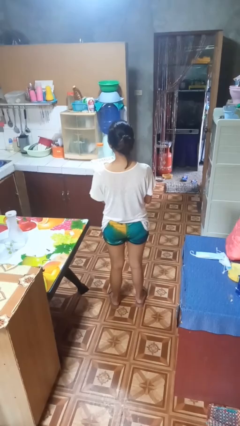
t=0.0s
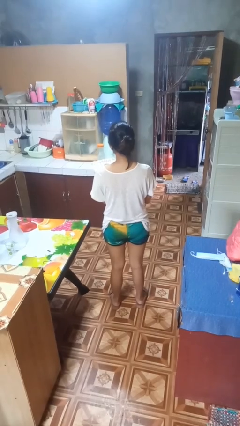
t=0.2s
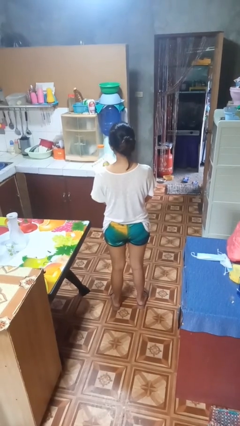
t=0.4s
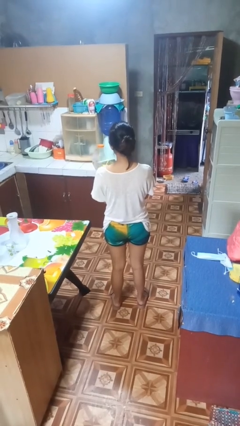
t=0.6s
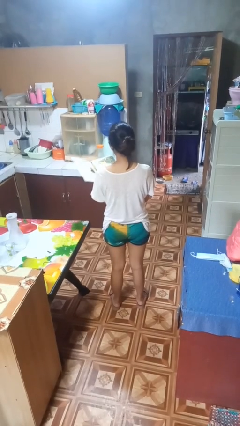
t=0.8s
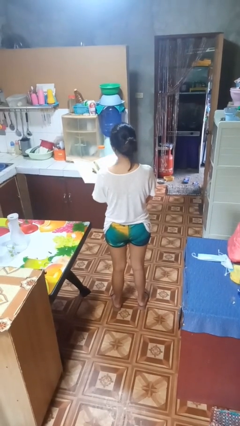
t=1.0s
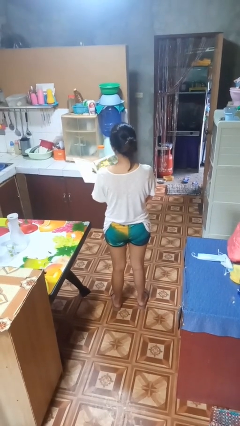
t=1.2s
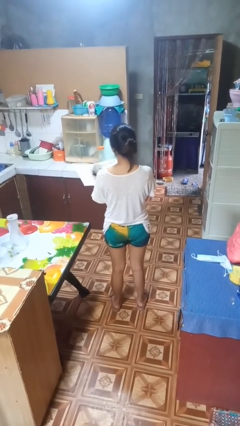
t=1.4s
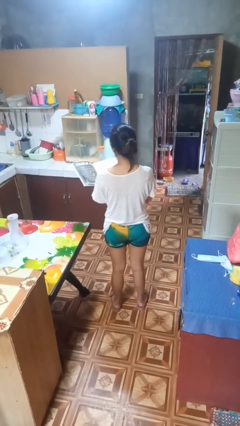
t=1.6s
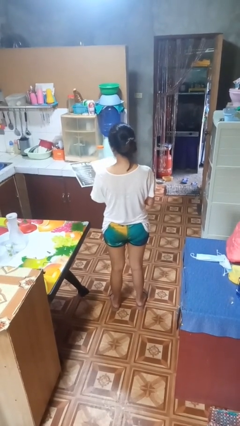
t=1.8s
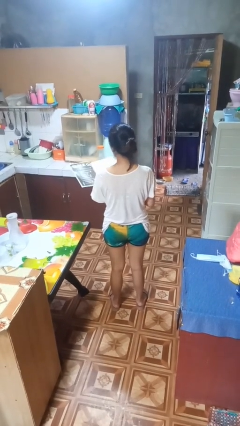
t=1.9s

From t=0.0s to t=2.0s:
person reads magazine

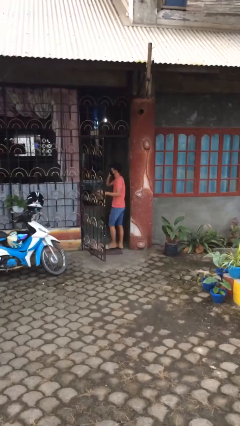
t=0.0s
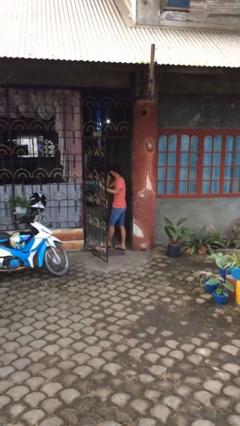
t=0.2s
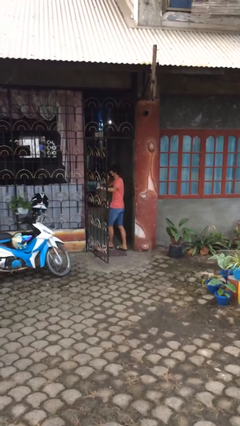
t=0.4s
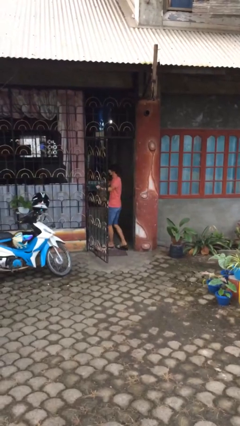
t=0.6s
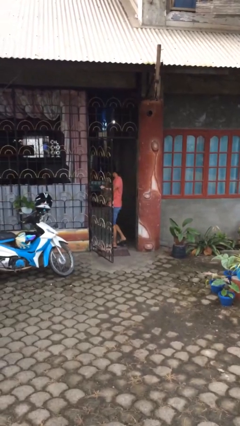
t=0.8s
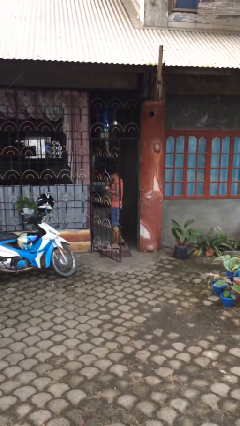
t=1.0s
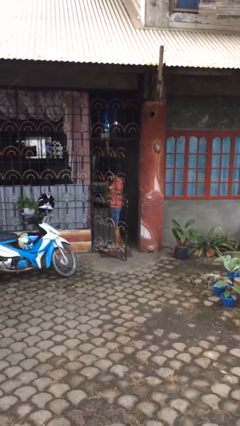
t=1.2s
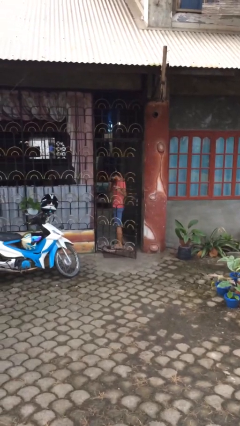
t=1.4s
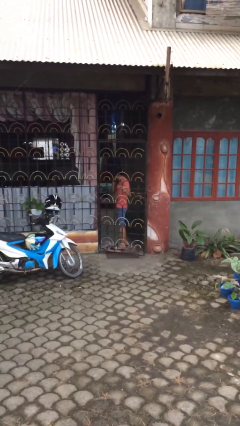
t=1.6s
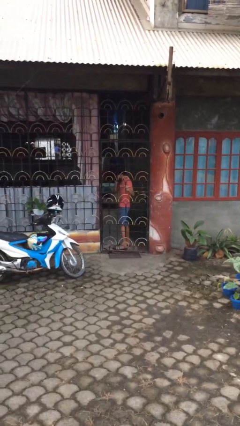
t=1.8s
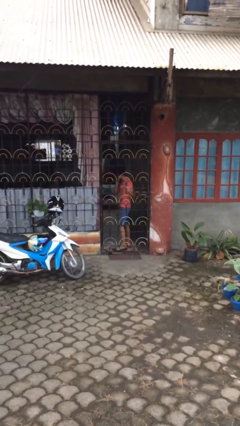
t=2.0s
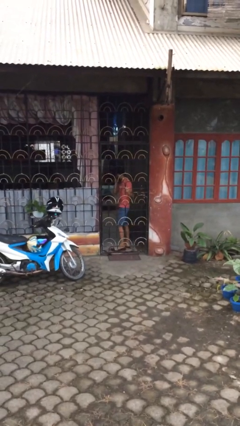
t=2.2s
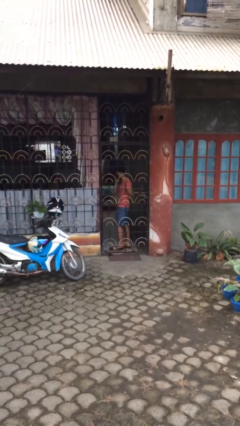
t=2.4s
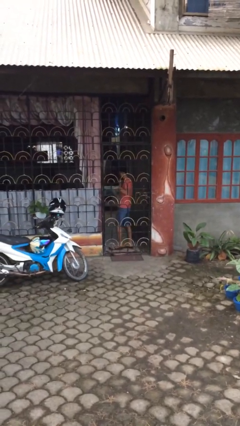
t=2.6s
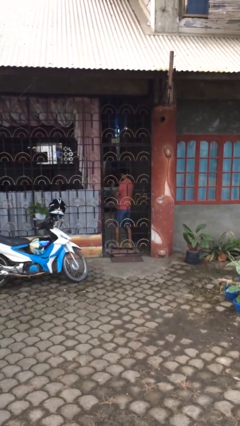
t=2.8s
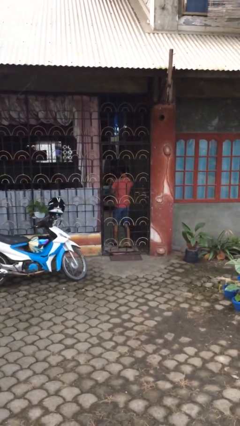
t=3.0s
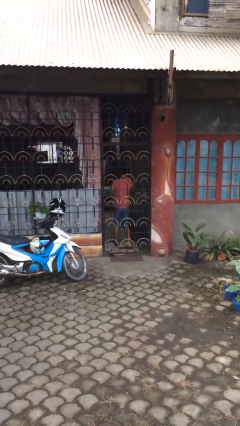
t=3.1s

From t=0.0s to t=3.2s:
person closes facility door

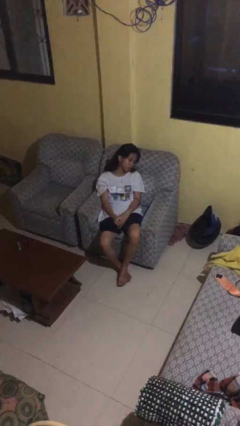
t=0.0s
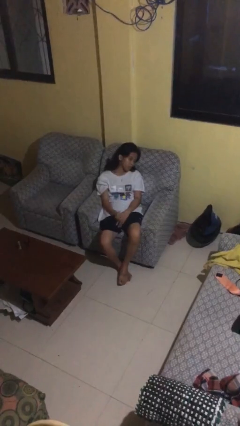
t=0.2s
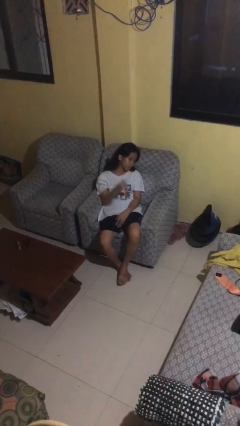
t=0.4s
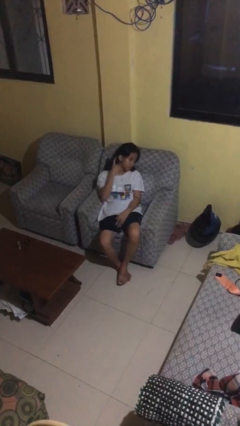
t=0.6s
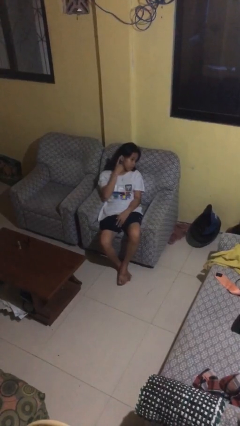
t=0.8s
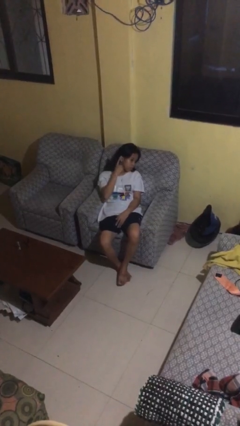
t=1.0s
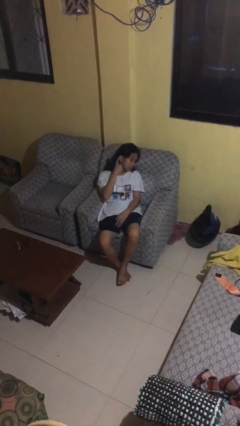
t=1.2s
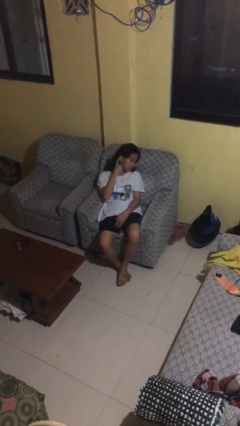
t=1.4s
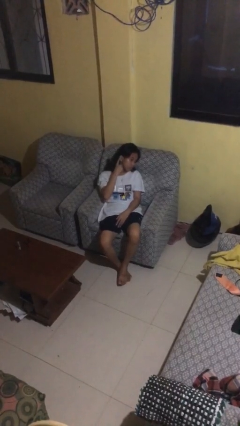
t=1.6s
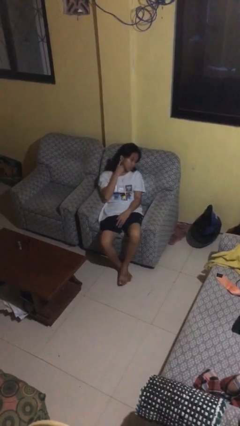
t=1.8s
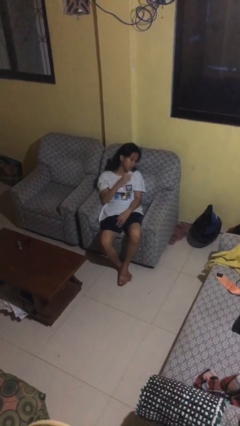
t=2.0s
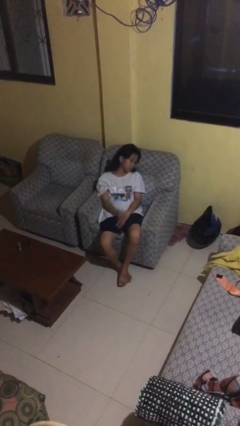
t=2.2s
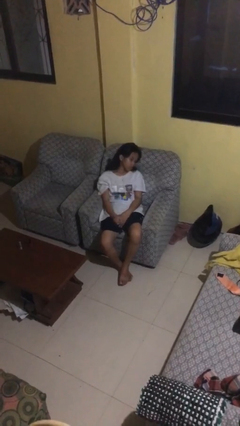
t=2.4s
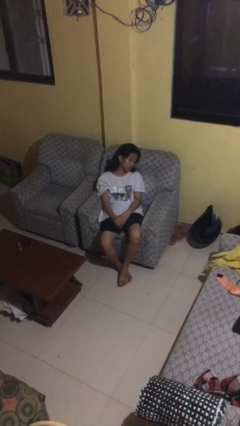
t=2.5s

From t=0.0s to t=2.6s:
person gestures listen closely

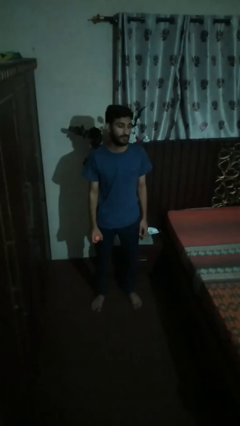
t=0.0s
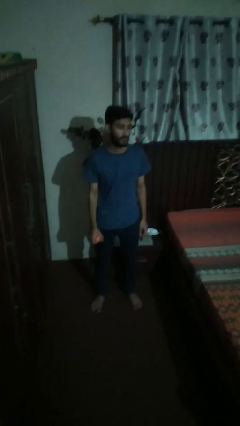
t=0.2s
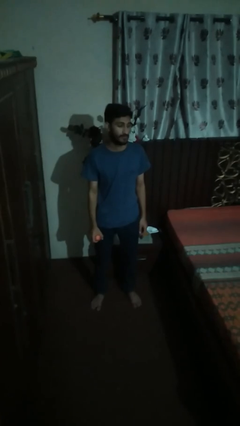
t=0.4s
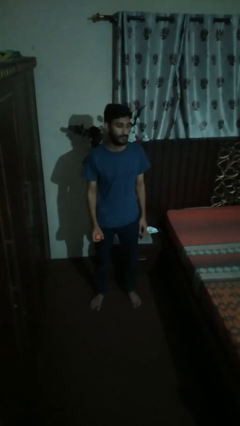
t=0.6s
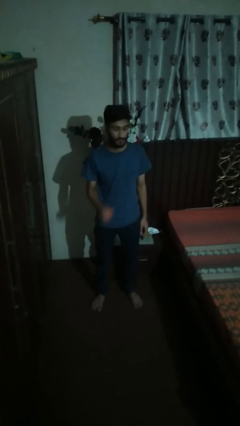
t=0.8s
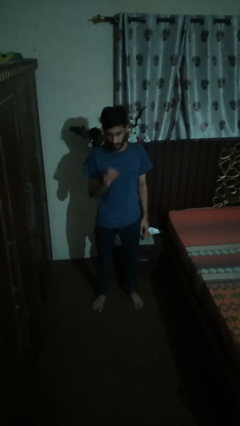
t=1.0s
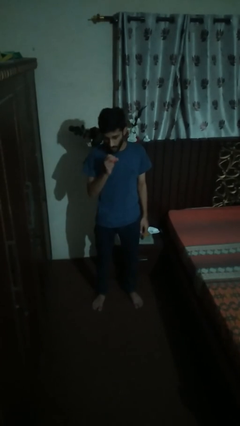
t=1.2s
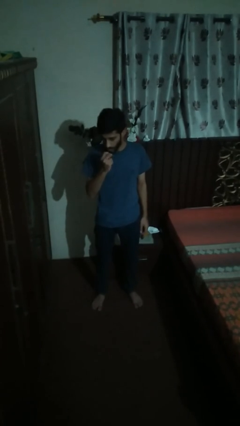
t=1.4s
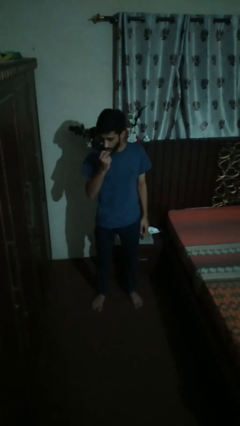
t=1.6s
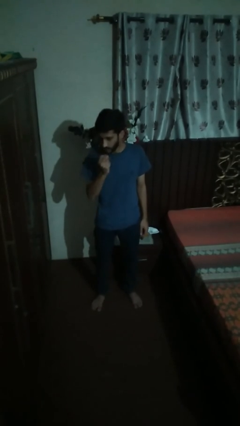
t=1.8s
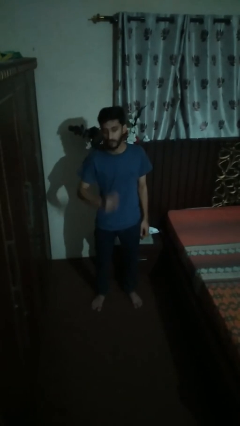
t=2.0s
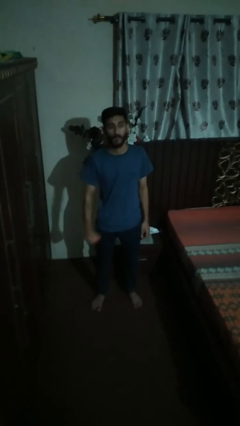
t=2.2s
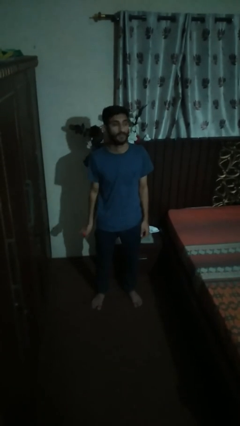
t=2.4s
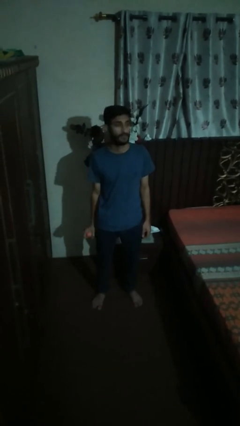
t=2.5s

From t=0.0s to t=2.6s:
person eats apple

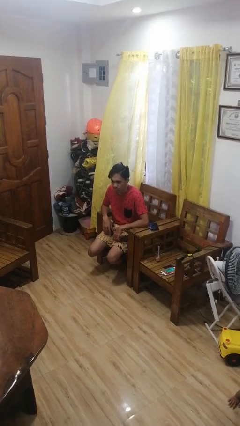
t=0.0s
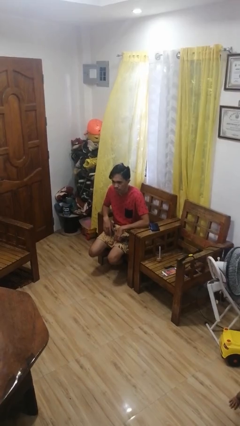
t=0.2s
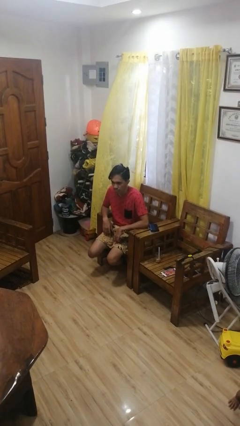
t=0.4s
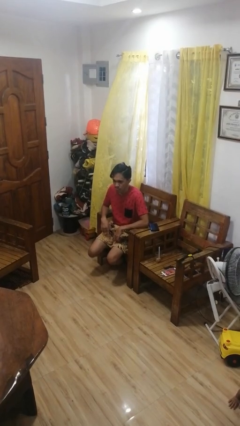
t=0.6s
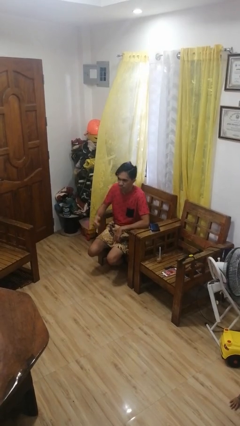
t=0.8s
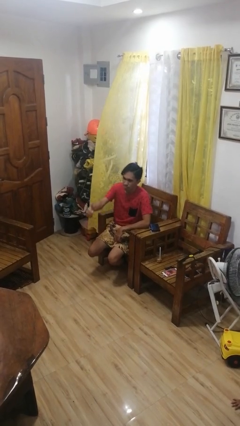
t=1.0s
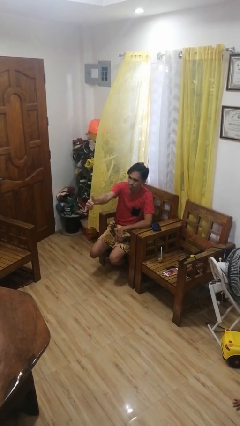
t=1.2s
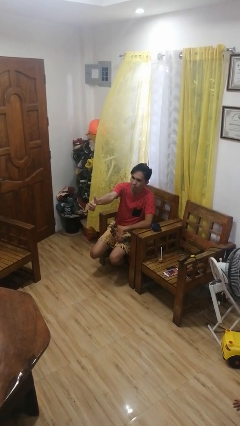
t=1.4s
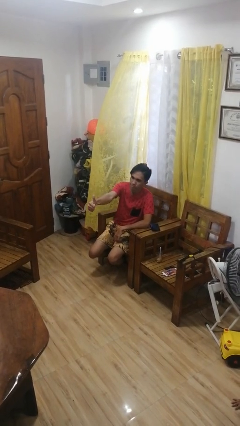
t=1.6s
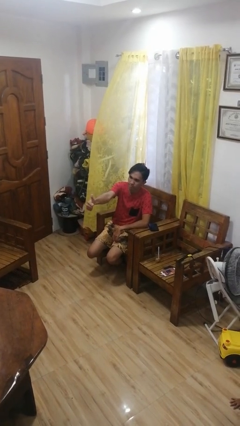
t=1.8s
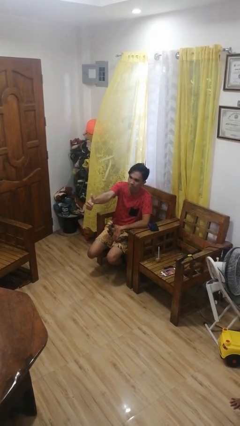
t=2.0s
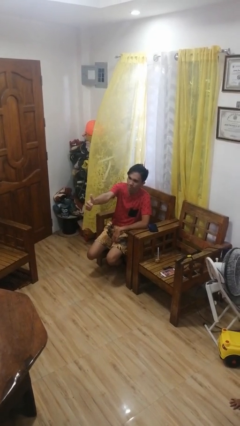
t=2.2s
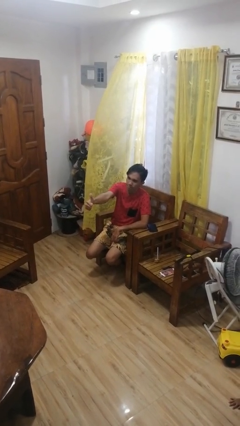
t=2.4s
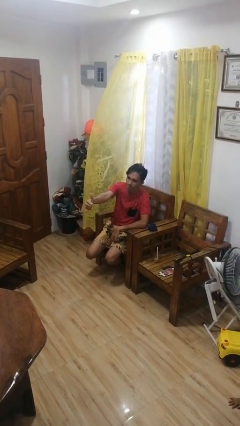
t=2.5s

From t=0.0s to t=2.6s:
person gestures thumbs up

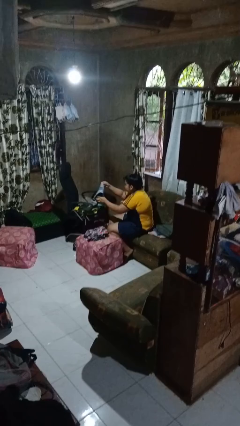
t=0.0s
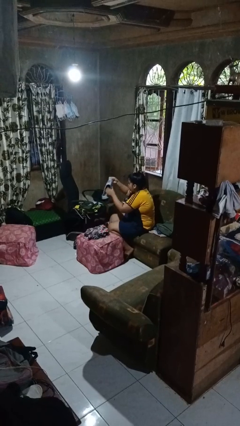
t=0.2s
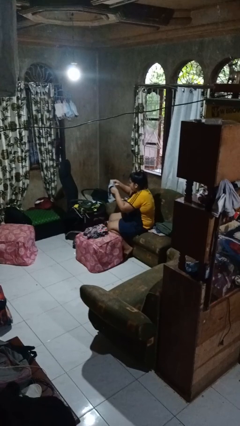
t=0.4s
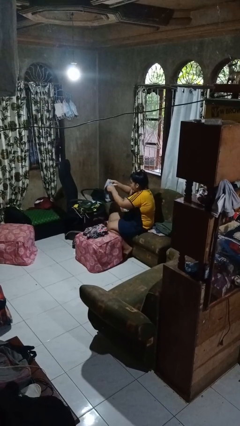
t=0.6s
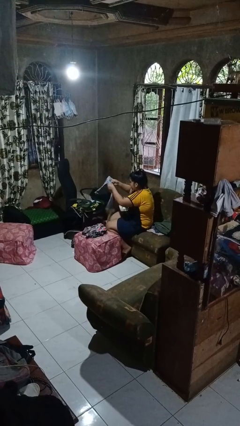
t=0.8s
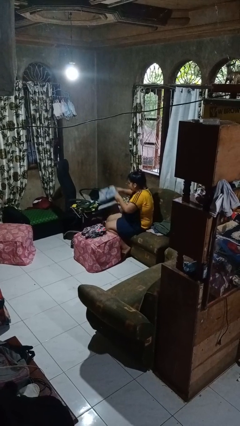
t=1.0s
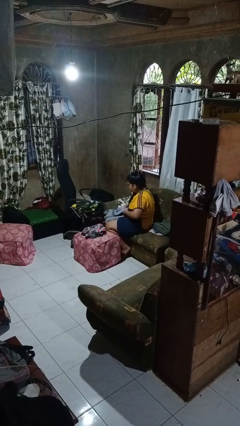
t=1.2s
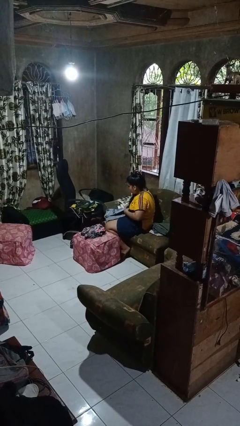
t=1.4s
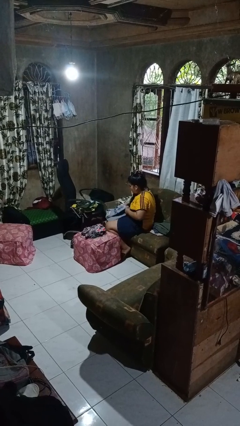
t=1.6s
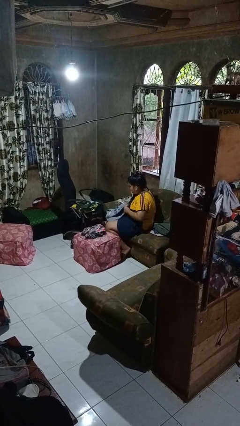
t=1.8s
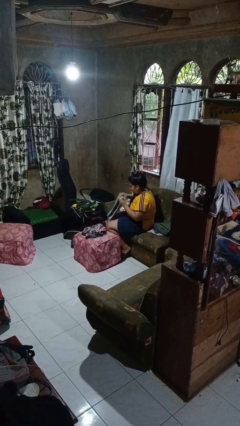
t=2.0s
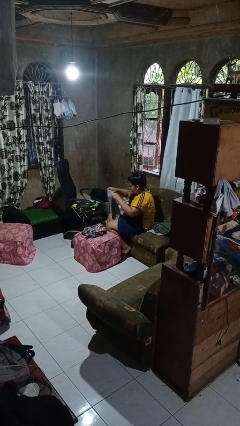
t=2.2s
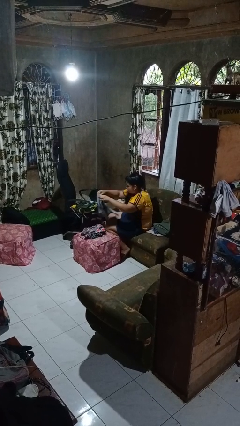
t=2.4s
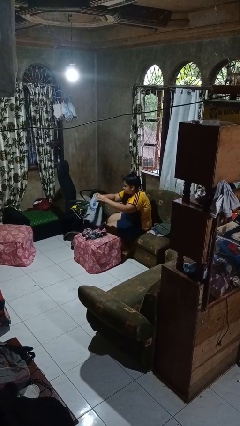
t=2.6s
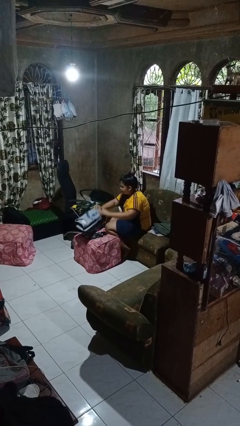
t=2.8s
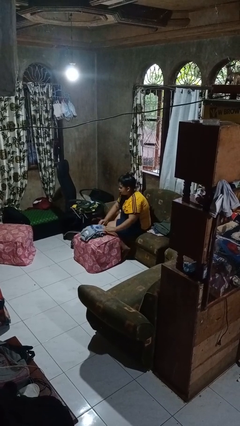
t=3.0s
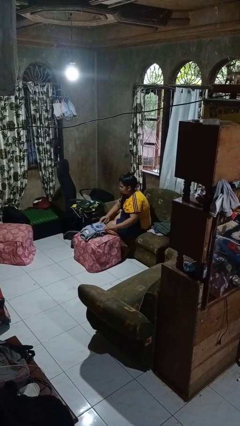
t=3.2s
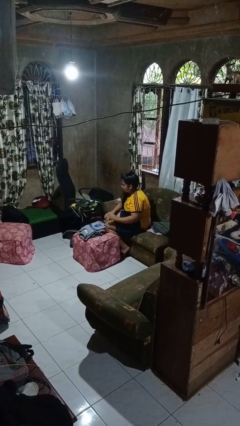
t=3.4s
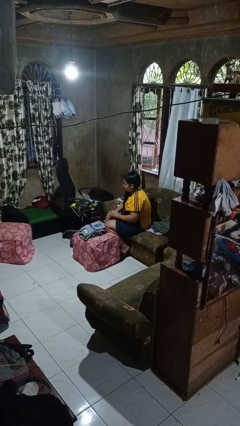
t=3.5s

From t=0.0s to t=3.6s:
person folds shirt

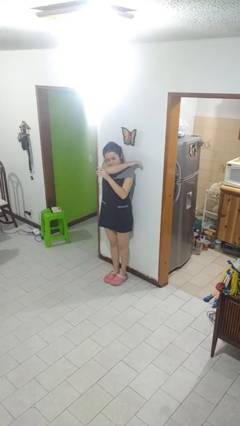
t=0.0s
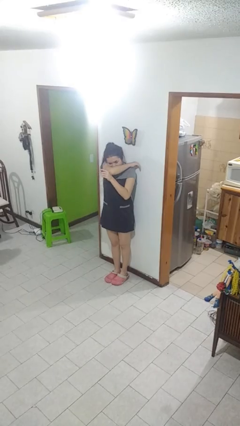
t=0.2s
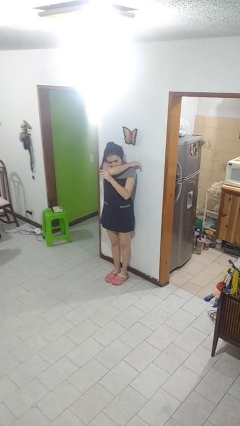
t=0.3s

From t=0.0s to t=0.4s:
person sneezes into arm
